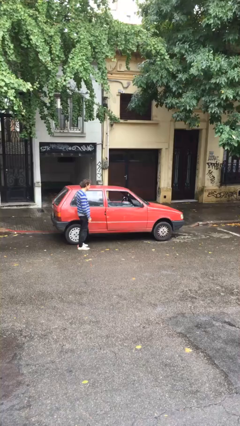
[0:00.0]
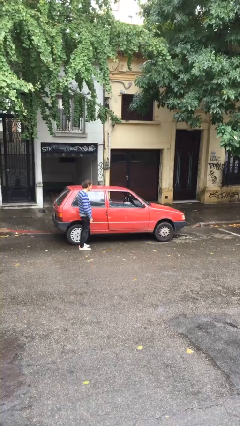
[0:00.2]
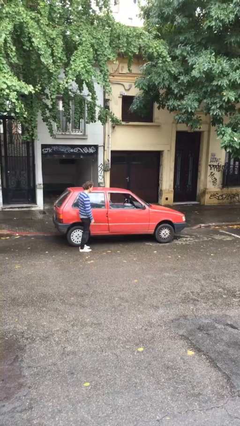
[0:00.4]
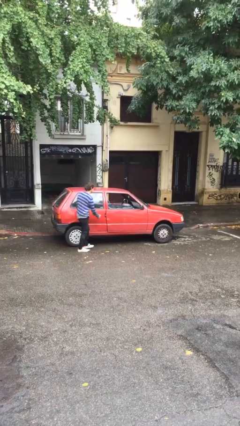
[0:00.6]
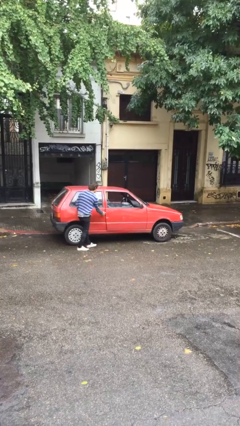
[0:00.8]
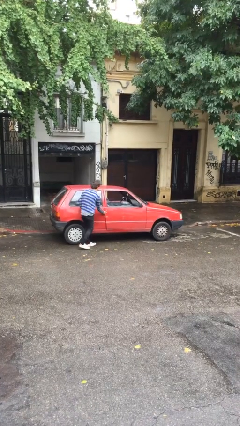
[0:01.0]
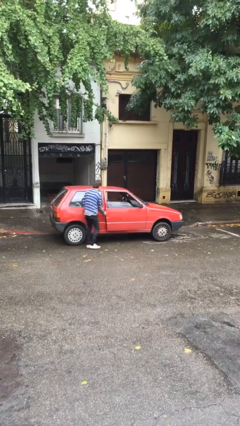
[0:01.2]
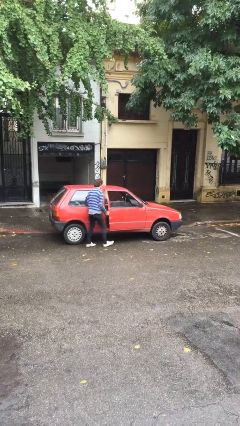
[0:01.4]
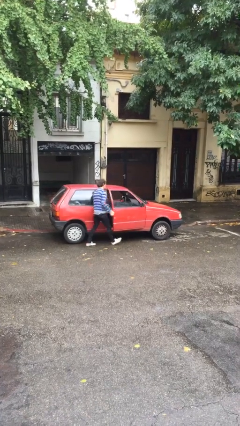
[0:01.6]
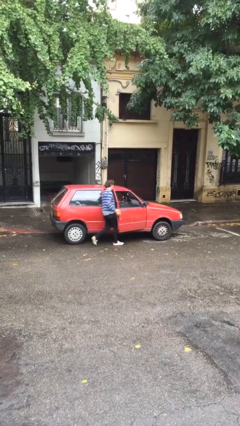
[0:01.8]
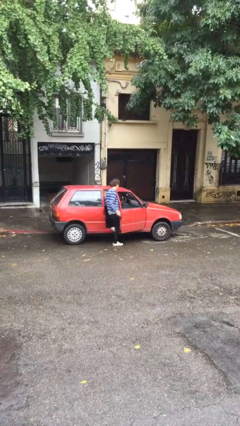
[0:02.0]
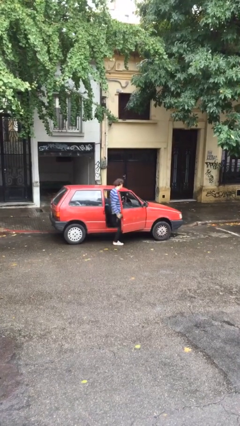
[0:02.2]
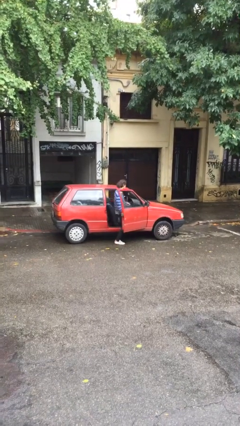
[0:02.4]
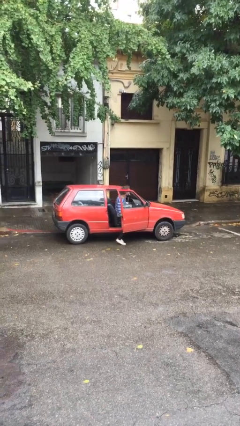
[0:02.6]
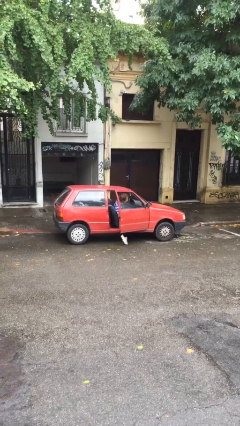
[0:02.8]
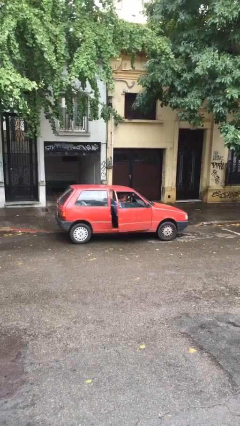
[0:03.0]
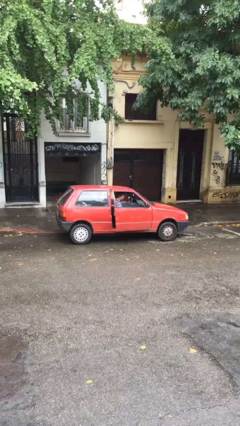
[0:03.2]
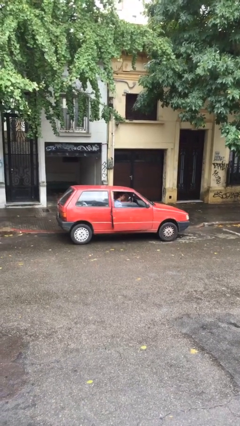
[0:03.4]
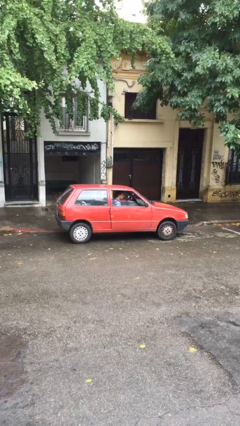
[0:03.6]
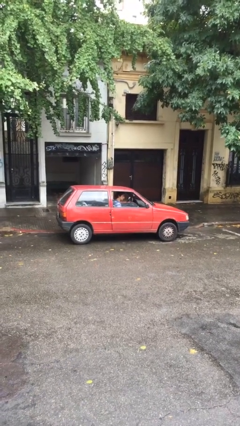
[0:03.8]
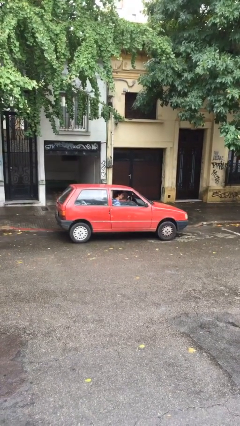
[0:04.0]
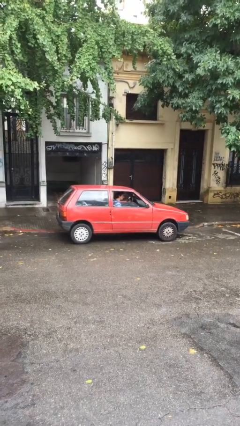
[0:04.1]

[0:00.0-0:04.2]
car picks up person

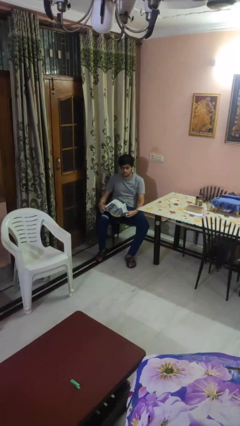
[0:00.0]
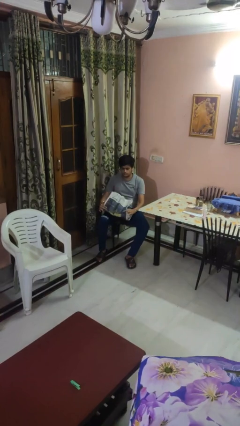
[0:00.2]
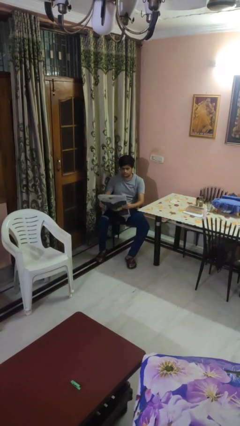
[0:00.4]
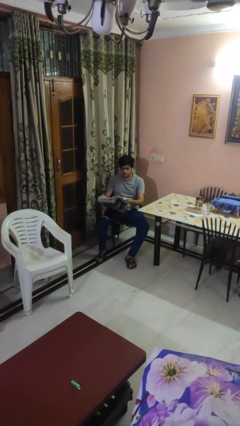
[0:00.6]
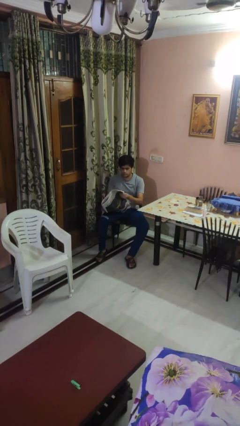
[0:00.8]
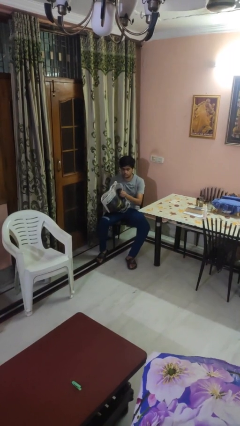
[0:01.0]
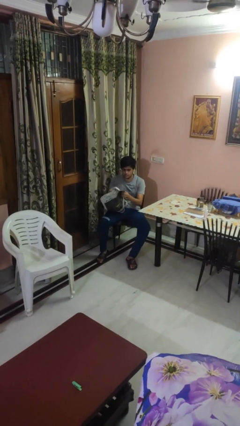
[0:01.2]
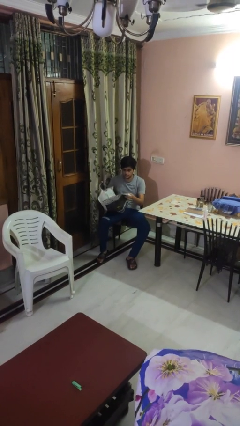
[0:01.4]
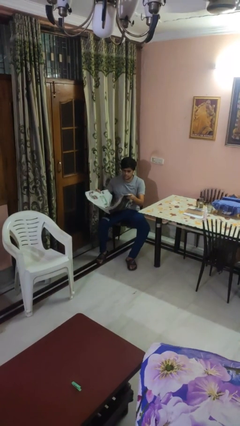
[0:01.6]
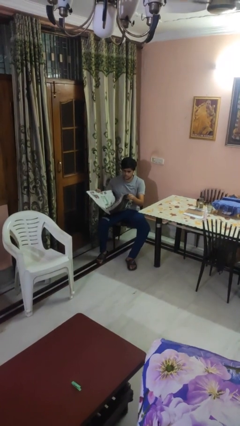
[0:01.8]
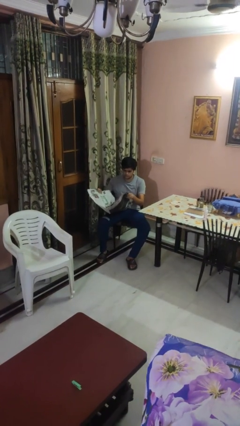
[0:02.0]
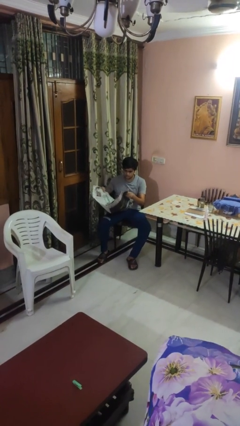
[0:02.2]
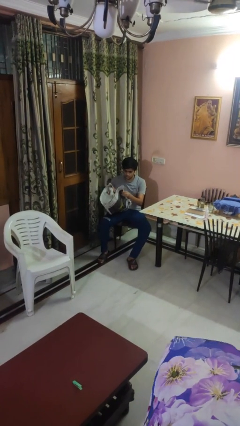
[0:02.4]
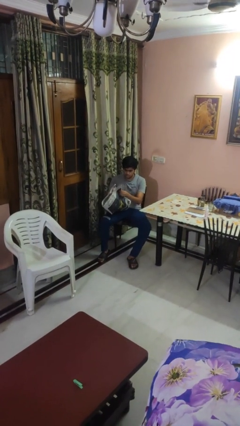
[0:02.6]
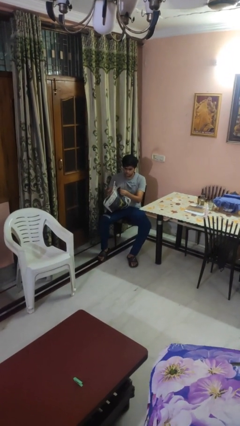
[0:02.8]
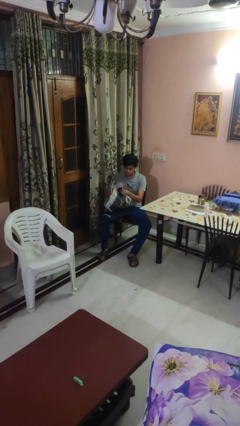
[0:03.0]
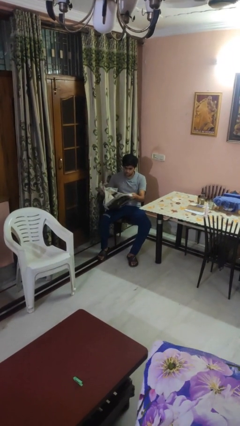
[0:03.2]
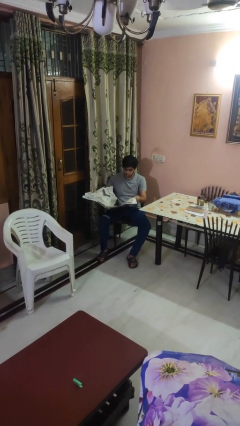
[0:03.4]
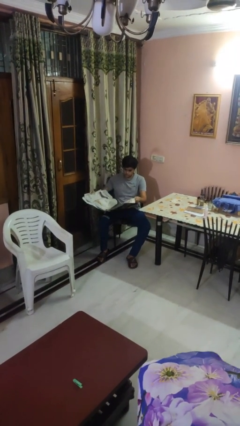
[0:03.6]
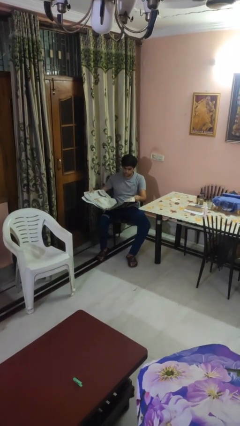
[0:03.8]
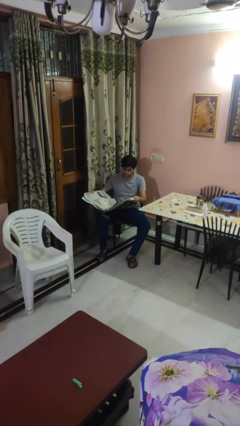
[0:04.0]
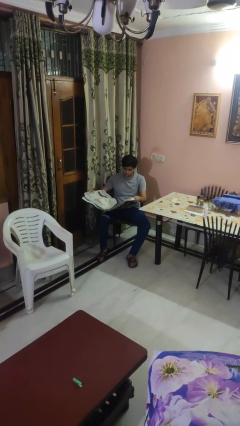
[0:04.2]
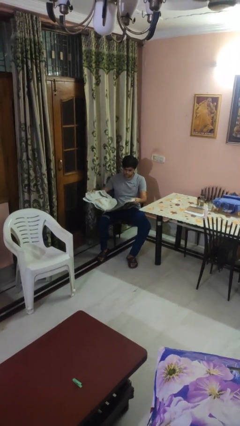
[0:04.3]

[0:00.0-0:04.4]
person reads newspaper

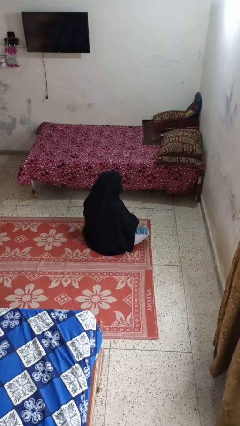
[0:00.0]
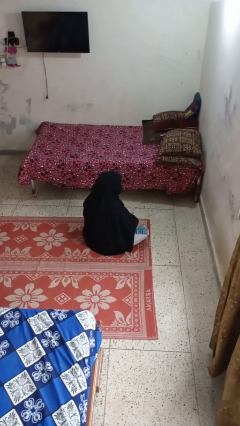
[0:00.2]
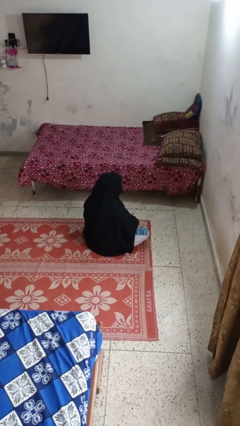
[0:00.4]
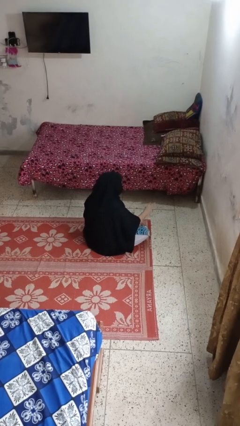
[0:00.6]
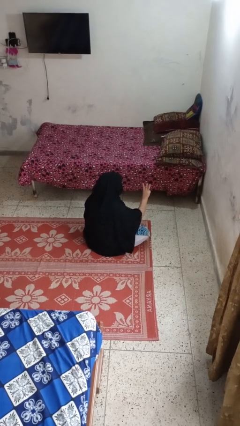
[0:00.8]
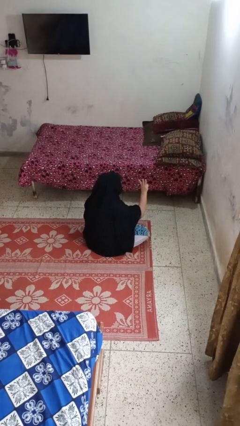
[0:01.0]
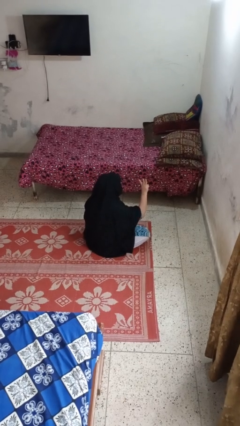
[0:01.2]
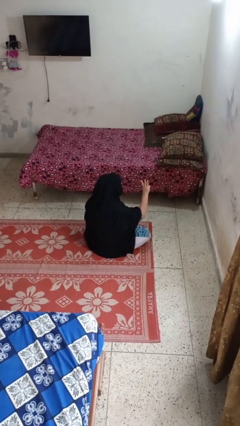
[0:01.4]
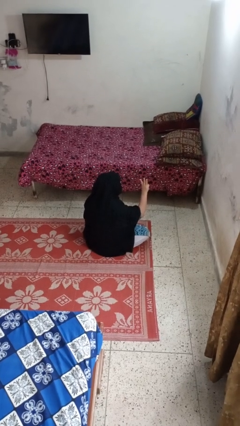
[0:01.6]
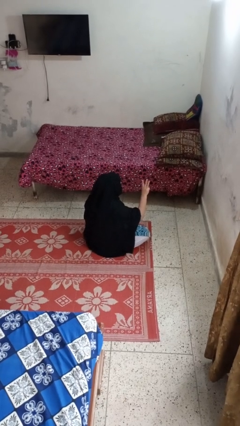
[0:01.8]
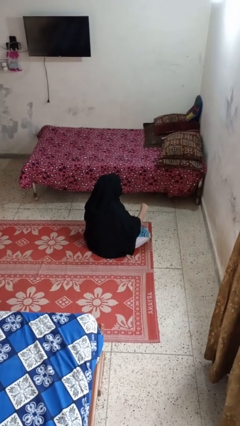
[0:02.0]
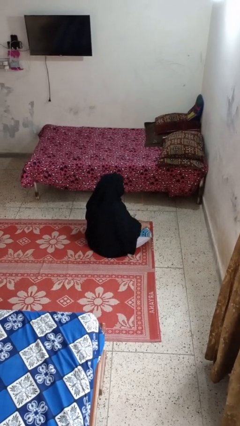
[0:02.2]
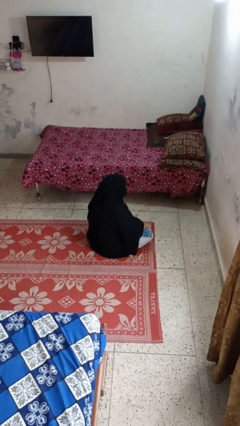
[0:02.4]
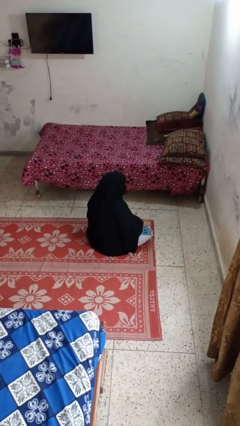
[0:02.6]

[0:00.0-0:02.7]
person gestures number three

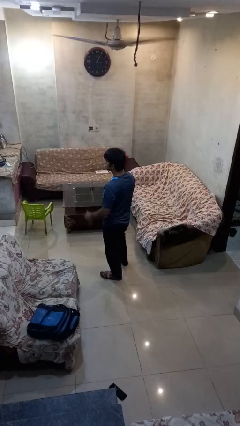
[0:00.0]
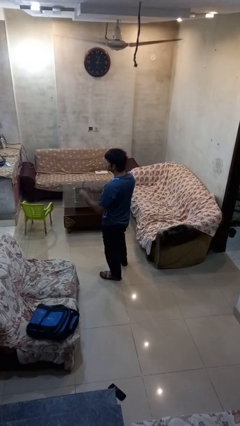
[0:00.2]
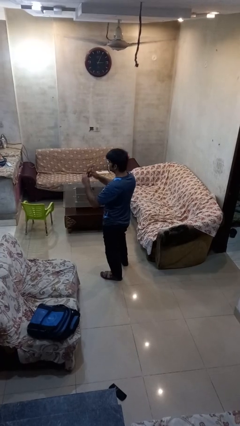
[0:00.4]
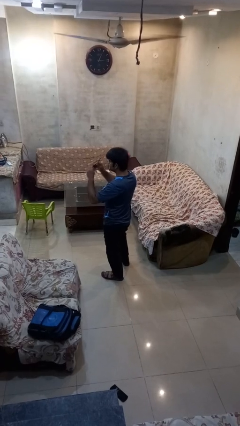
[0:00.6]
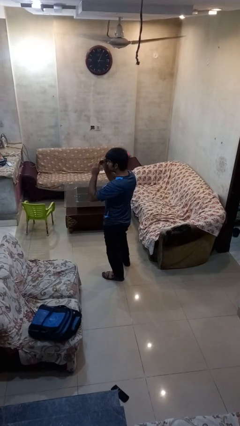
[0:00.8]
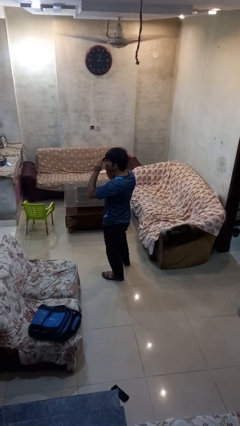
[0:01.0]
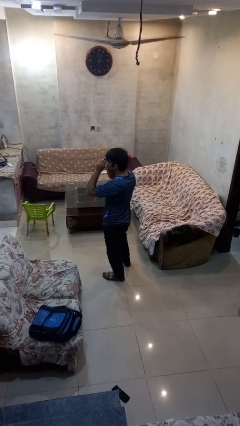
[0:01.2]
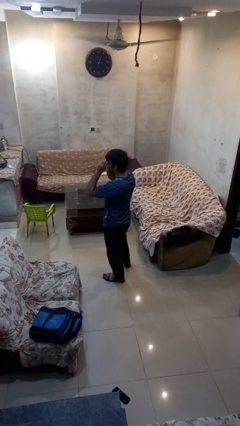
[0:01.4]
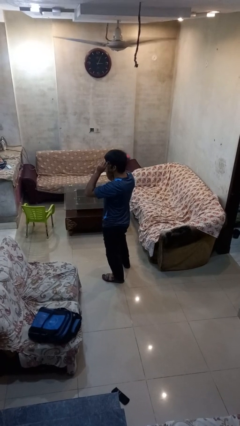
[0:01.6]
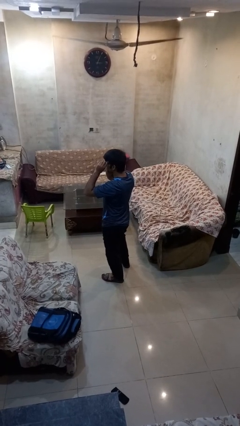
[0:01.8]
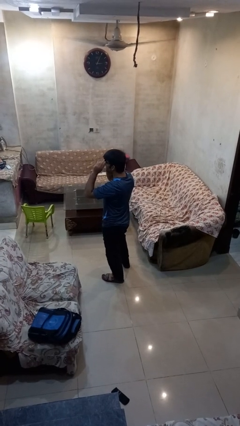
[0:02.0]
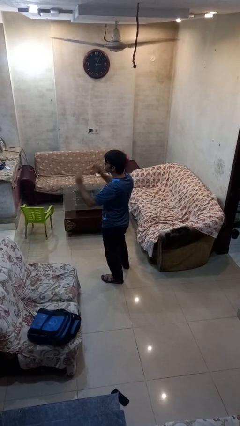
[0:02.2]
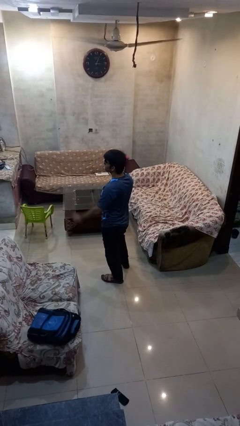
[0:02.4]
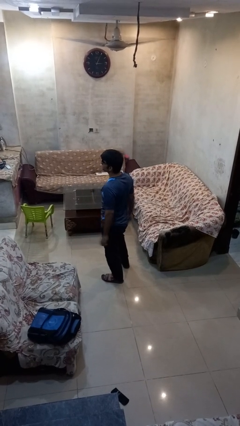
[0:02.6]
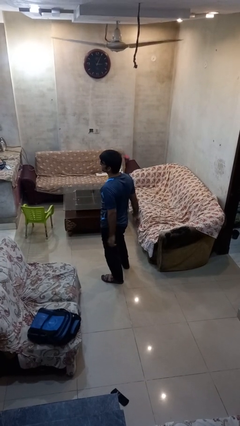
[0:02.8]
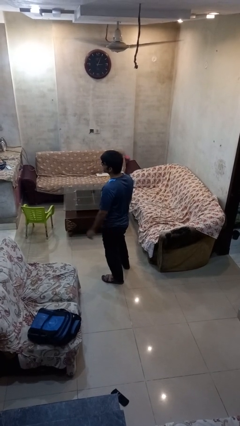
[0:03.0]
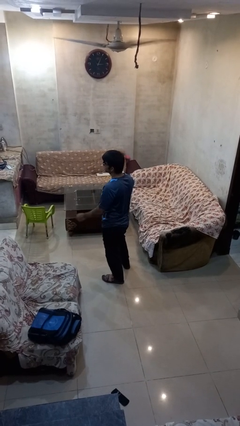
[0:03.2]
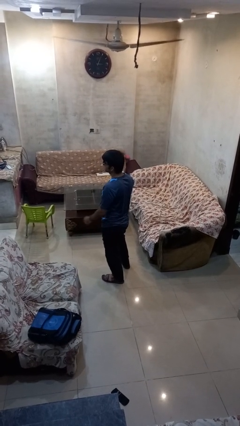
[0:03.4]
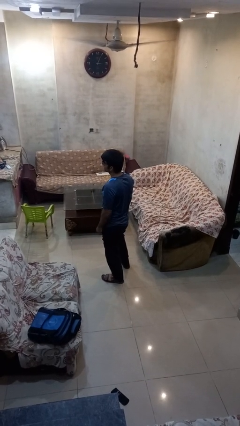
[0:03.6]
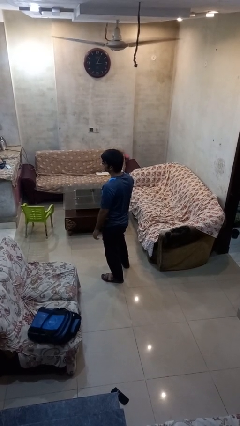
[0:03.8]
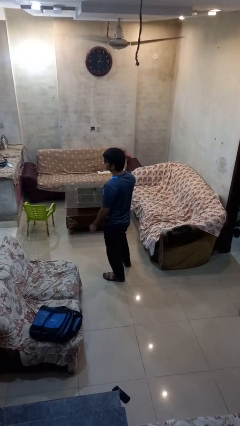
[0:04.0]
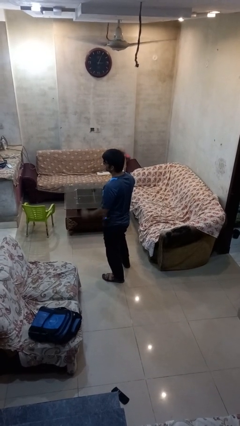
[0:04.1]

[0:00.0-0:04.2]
person puts on sunglasses

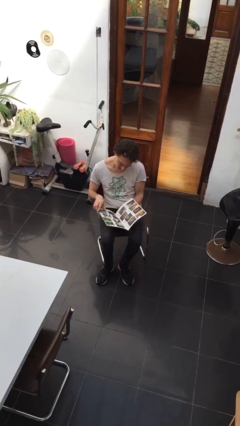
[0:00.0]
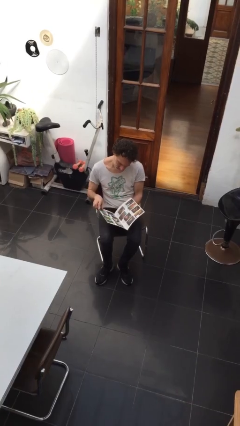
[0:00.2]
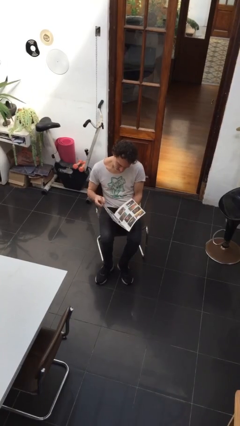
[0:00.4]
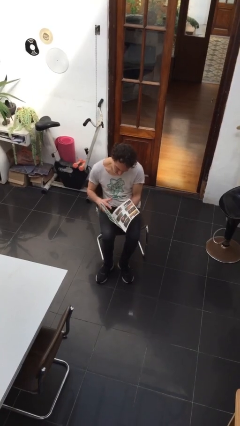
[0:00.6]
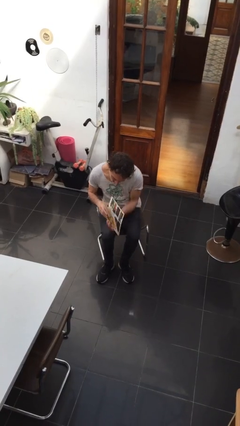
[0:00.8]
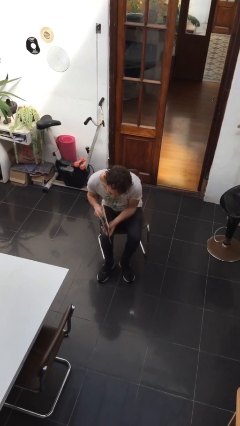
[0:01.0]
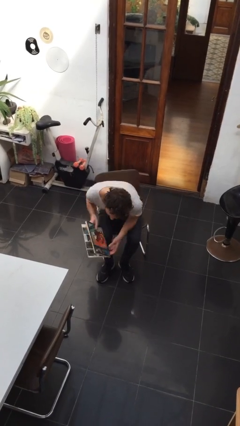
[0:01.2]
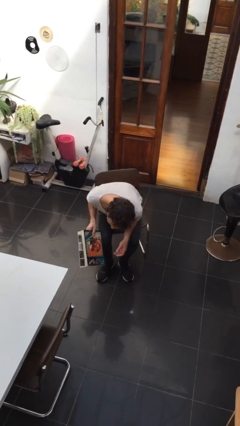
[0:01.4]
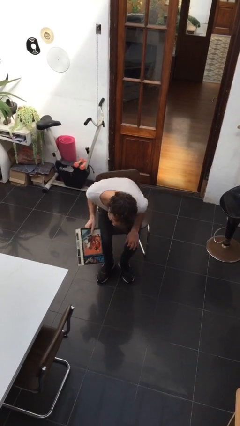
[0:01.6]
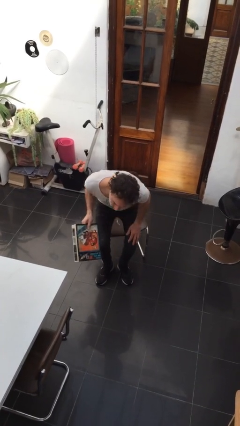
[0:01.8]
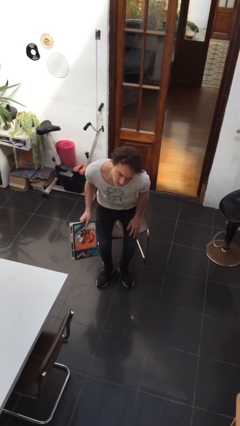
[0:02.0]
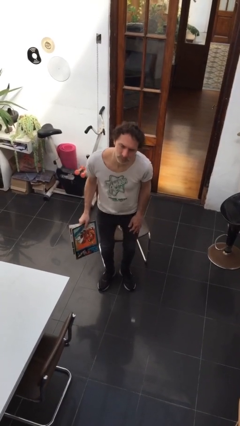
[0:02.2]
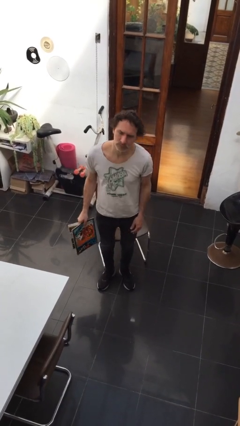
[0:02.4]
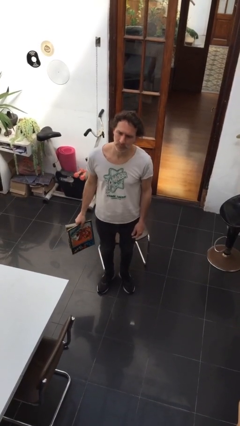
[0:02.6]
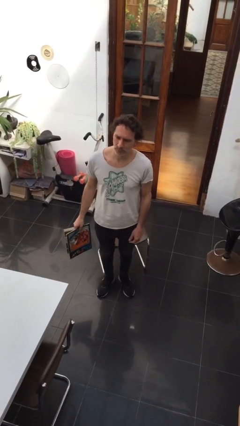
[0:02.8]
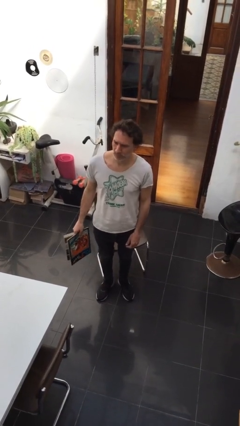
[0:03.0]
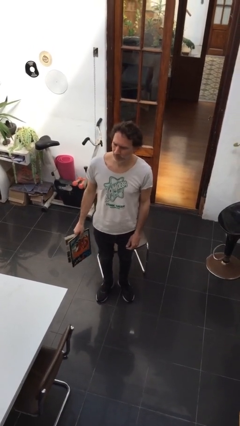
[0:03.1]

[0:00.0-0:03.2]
person stands up
